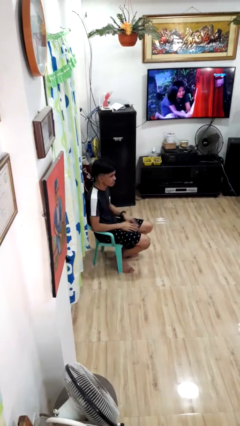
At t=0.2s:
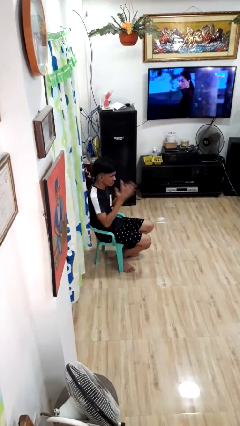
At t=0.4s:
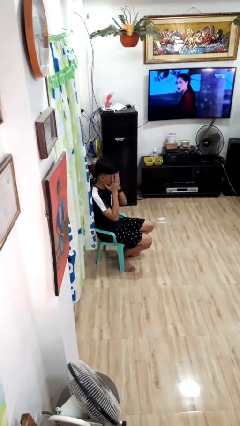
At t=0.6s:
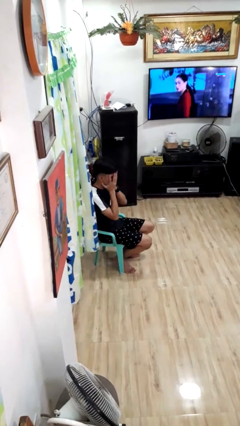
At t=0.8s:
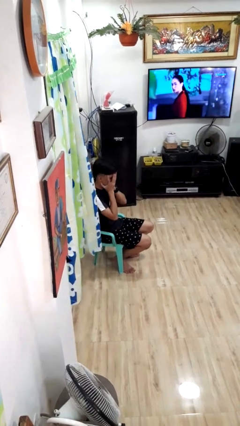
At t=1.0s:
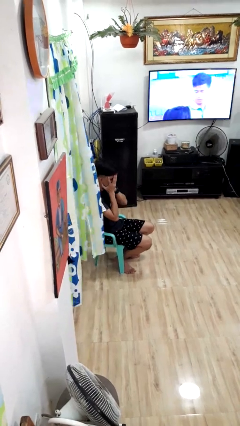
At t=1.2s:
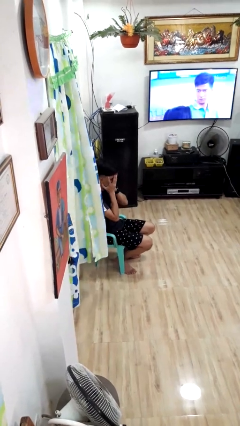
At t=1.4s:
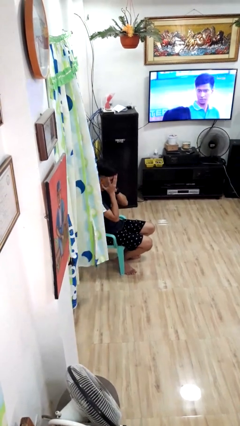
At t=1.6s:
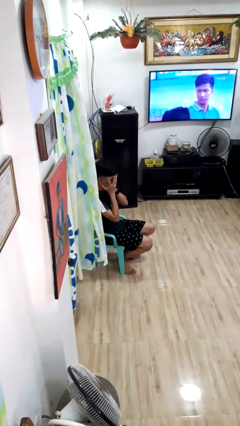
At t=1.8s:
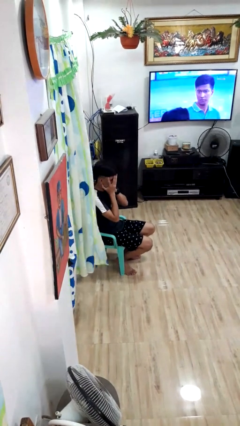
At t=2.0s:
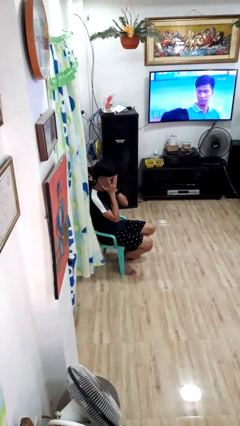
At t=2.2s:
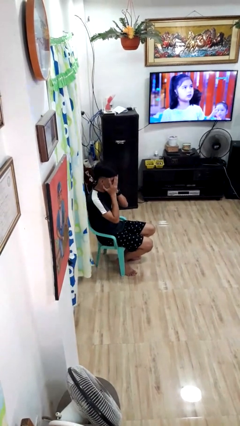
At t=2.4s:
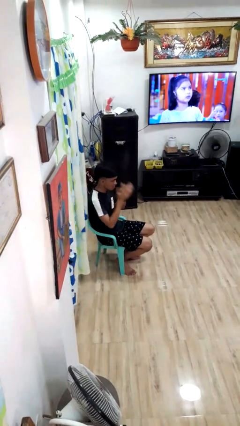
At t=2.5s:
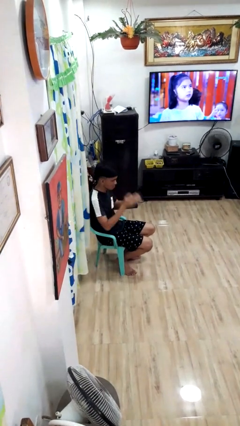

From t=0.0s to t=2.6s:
person covers face with hands

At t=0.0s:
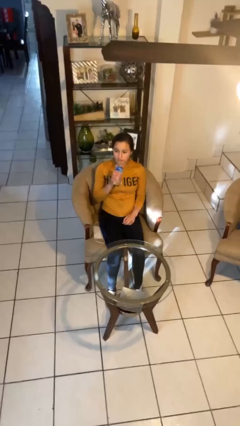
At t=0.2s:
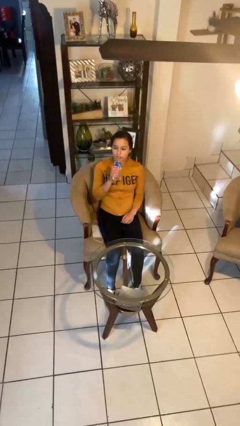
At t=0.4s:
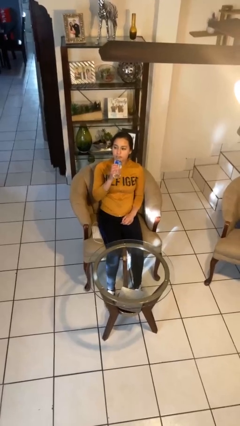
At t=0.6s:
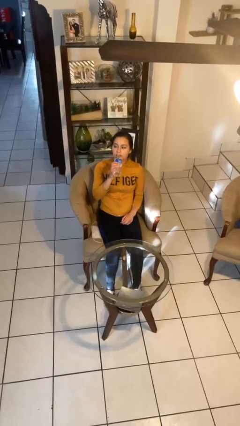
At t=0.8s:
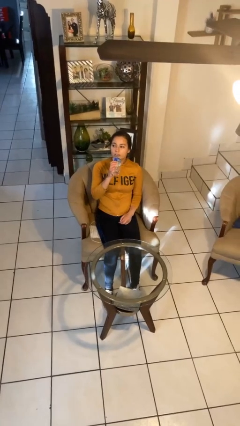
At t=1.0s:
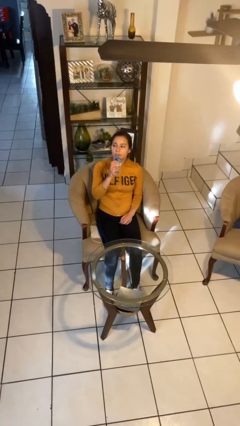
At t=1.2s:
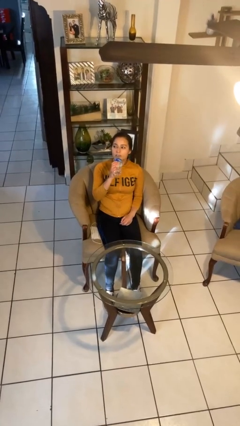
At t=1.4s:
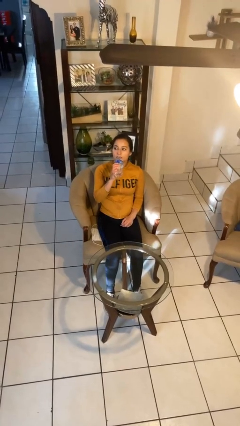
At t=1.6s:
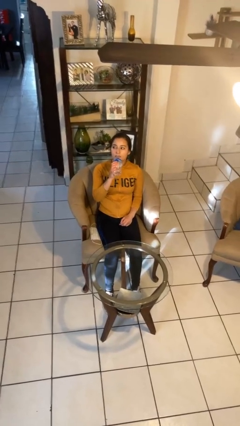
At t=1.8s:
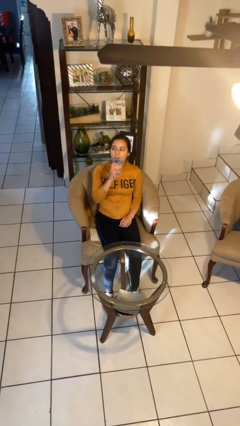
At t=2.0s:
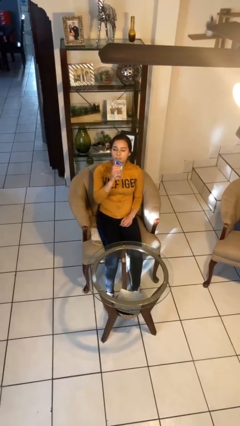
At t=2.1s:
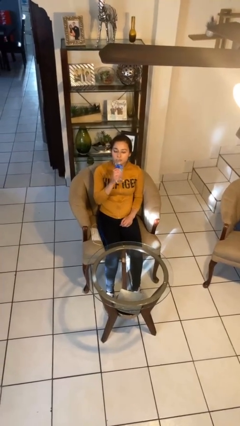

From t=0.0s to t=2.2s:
person drinks from bottle

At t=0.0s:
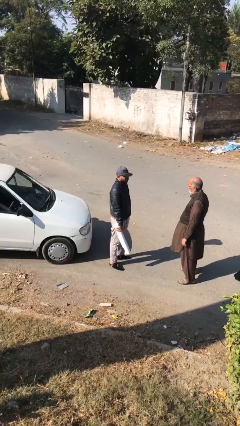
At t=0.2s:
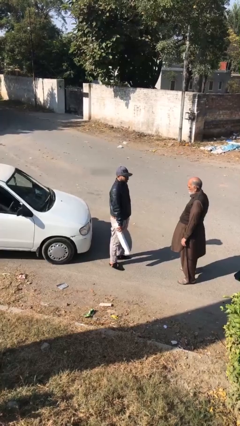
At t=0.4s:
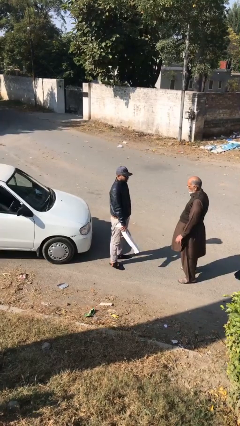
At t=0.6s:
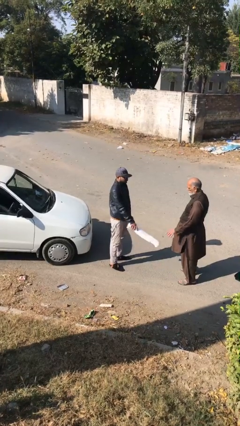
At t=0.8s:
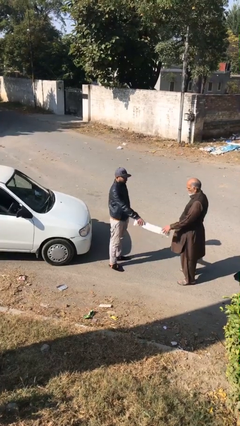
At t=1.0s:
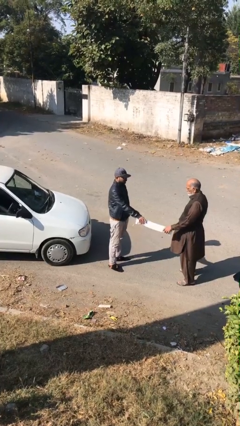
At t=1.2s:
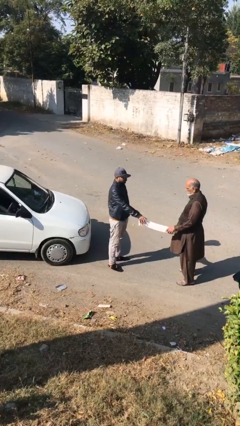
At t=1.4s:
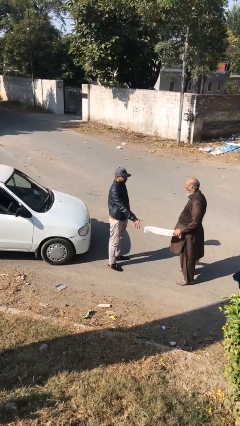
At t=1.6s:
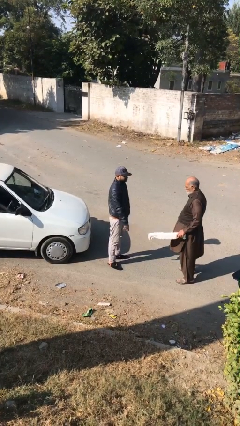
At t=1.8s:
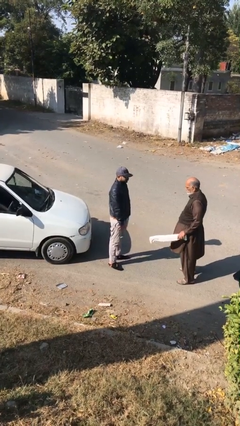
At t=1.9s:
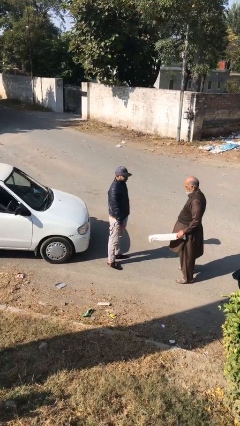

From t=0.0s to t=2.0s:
person transfers object to person

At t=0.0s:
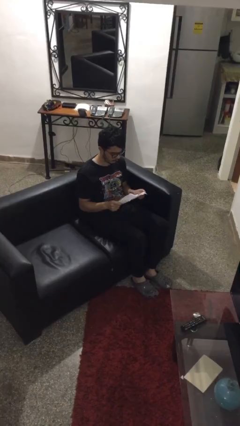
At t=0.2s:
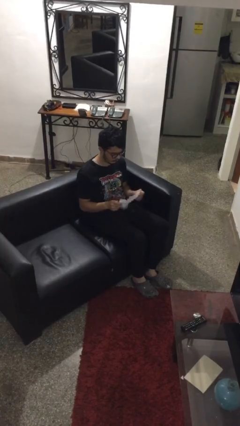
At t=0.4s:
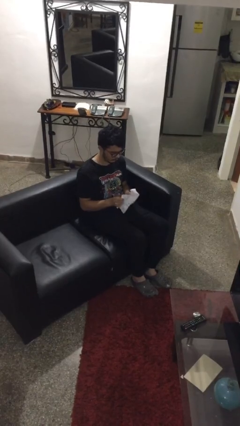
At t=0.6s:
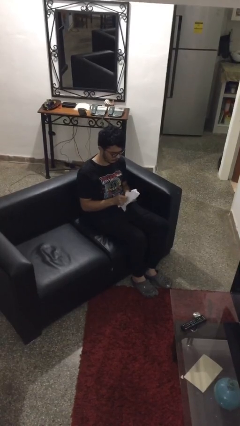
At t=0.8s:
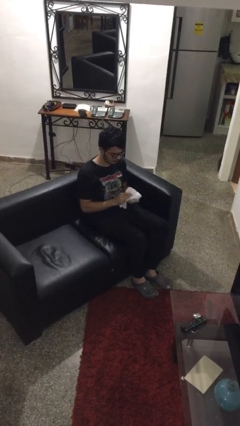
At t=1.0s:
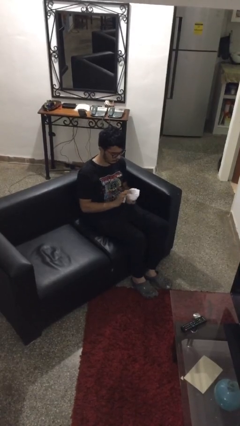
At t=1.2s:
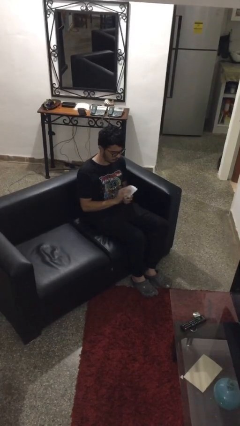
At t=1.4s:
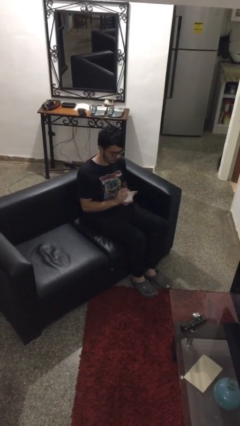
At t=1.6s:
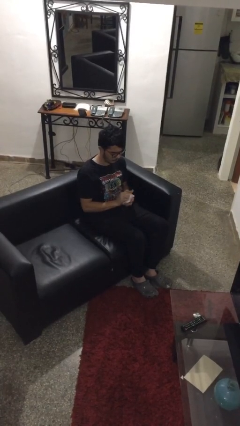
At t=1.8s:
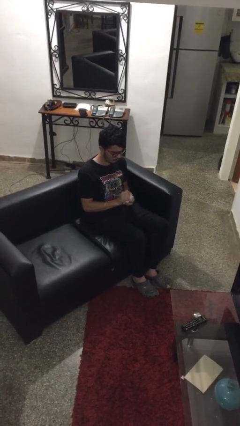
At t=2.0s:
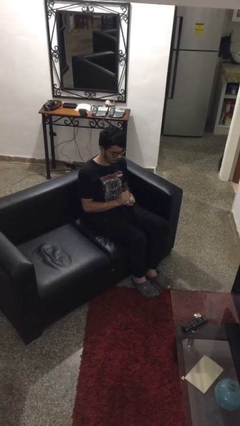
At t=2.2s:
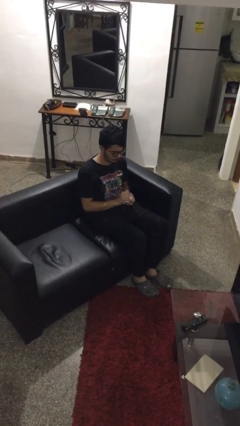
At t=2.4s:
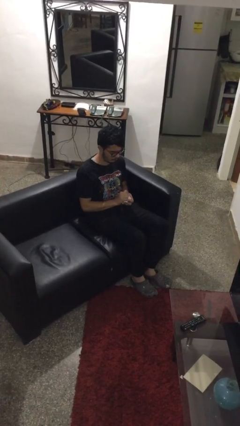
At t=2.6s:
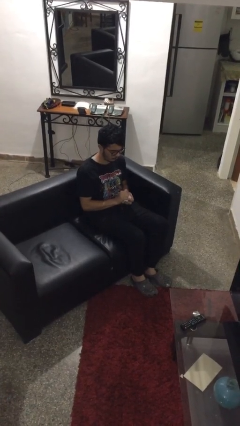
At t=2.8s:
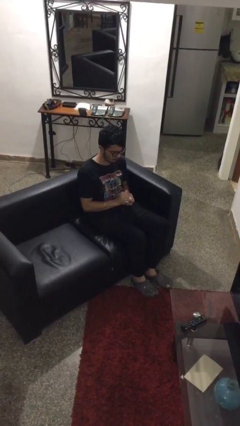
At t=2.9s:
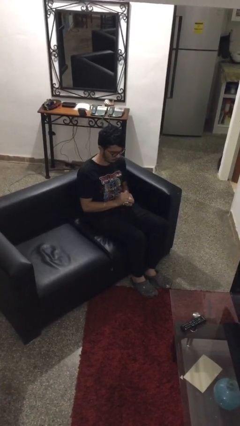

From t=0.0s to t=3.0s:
person crumples paper

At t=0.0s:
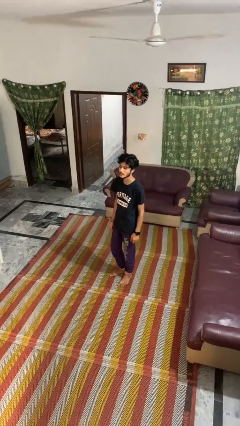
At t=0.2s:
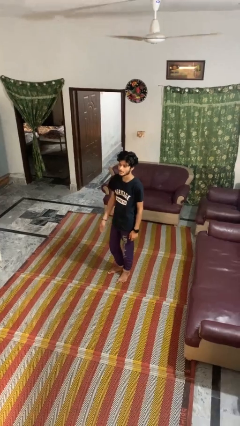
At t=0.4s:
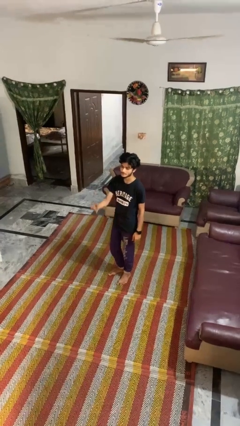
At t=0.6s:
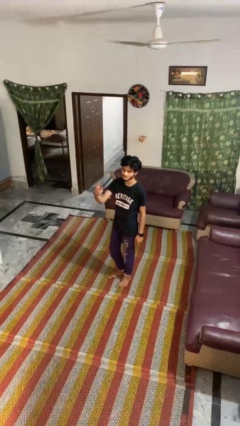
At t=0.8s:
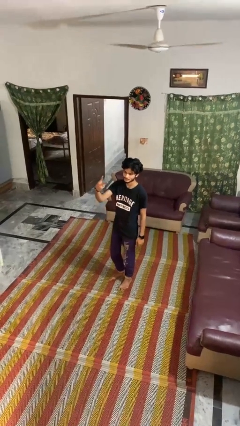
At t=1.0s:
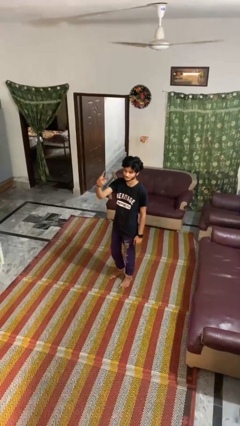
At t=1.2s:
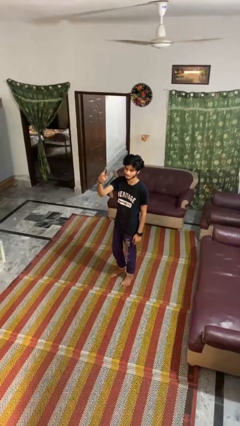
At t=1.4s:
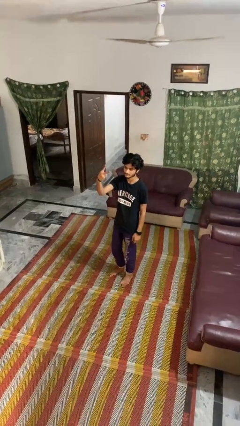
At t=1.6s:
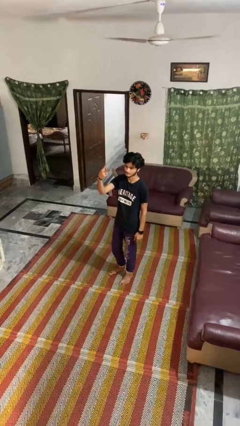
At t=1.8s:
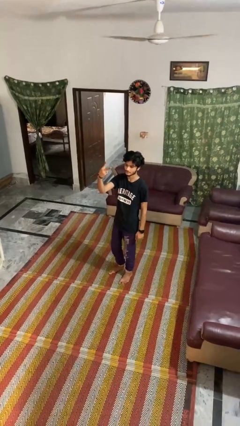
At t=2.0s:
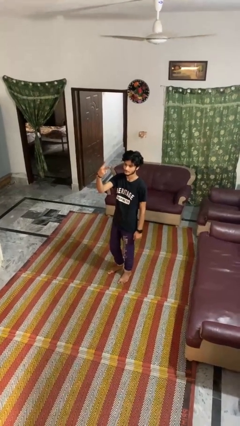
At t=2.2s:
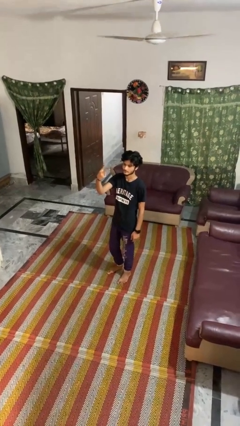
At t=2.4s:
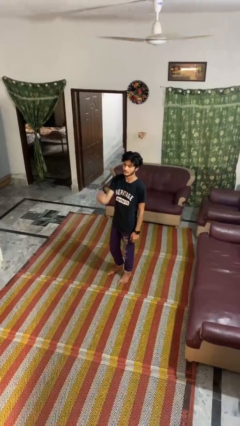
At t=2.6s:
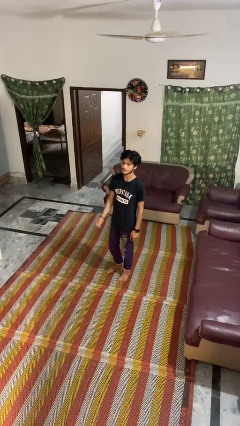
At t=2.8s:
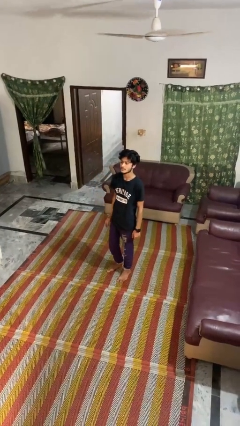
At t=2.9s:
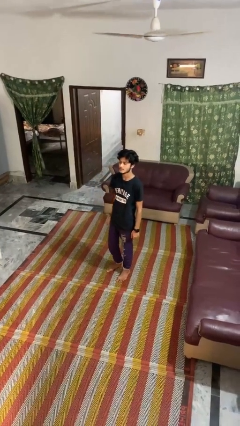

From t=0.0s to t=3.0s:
person gestures peace

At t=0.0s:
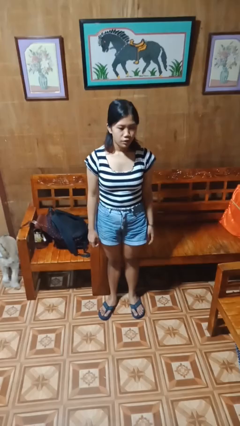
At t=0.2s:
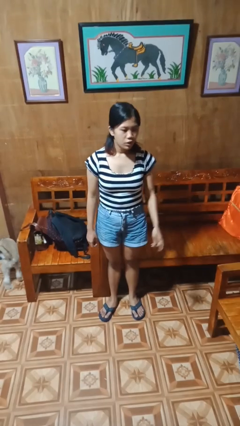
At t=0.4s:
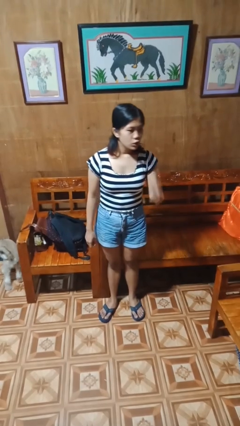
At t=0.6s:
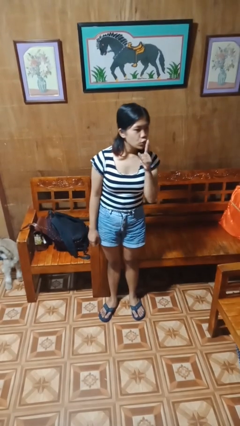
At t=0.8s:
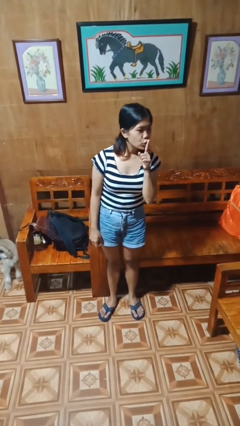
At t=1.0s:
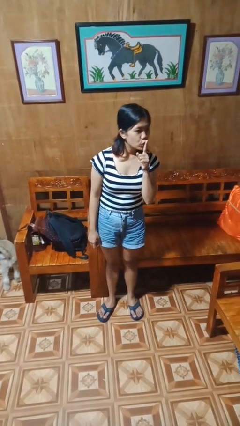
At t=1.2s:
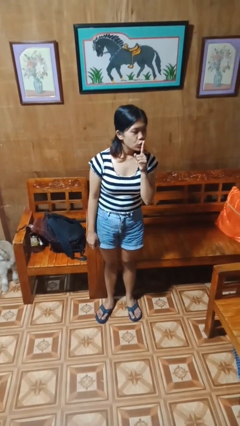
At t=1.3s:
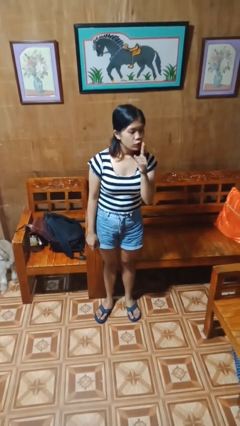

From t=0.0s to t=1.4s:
person gestures be quiet

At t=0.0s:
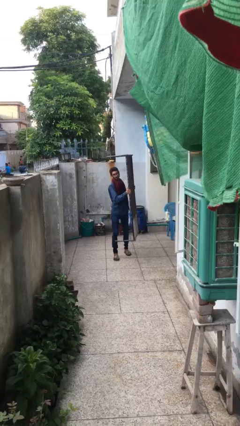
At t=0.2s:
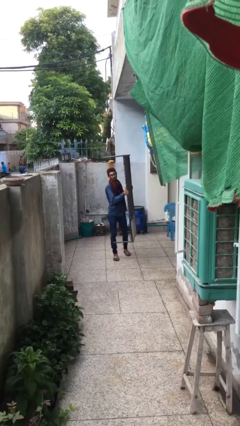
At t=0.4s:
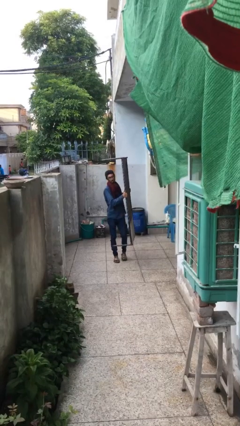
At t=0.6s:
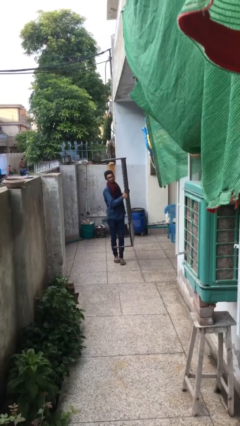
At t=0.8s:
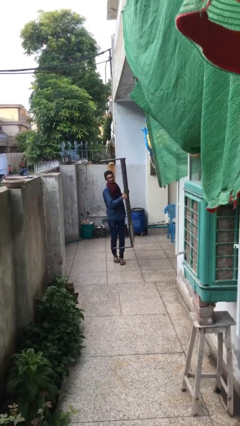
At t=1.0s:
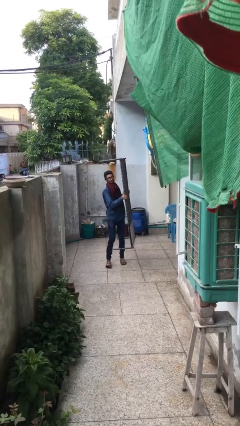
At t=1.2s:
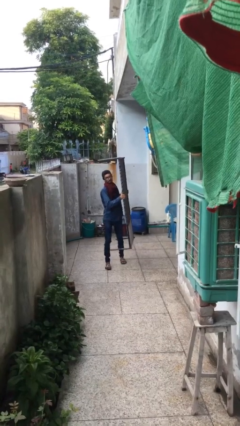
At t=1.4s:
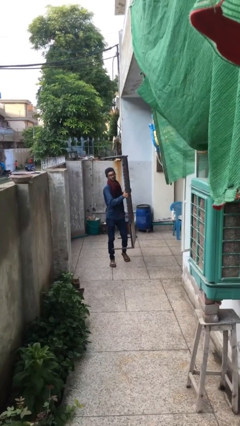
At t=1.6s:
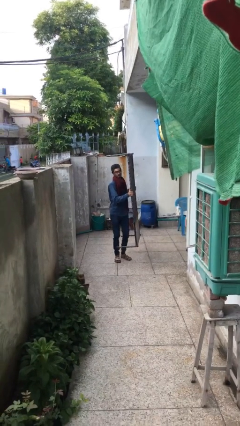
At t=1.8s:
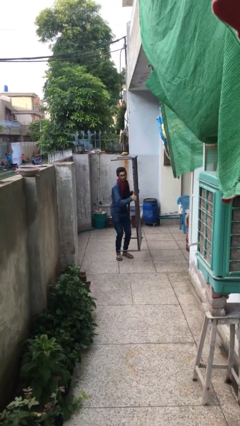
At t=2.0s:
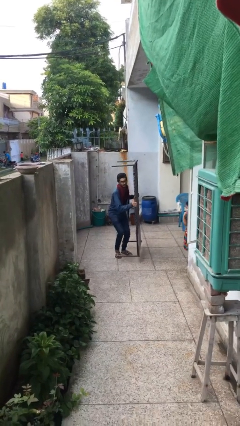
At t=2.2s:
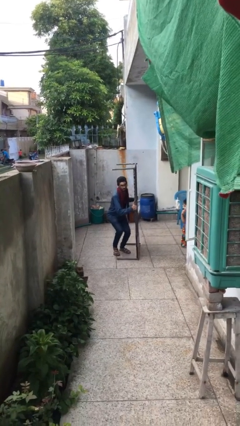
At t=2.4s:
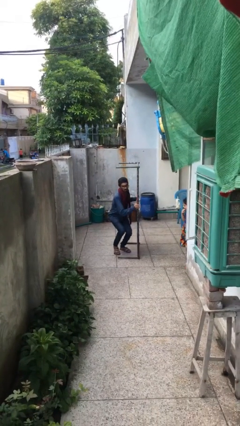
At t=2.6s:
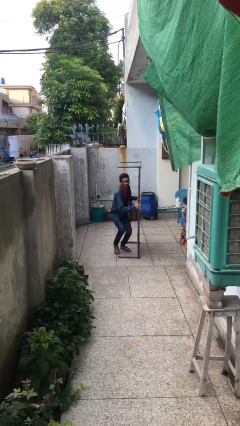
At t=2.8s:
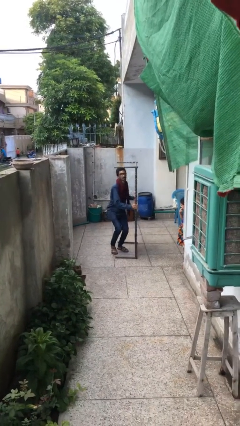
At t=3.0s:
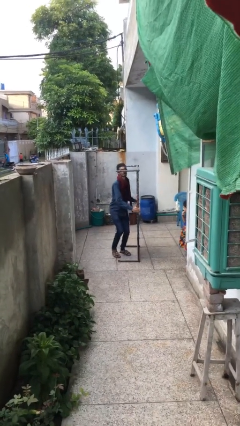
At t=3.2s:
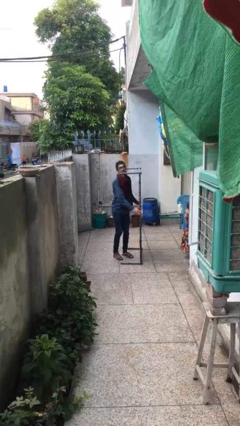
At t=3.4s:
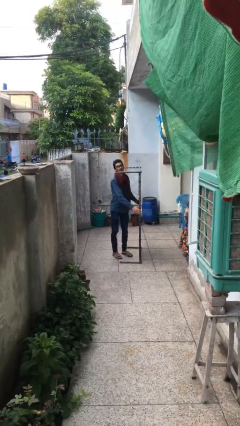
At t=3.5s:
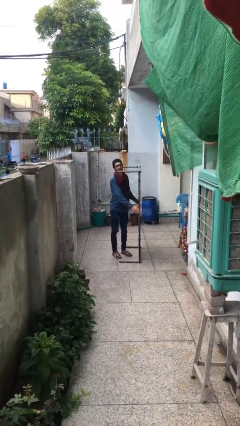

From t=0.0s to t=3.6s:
person puts down object on floor
